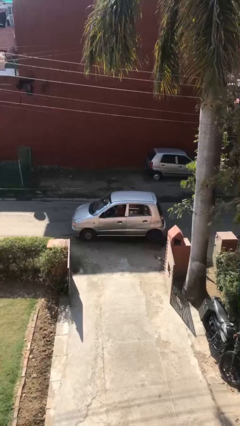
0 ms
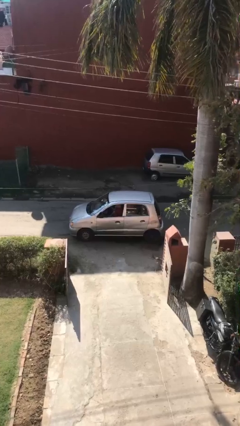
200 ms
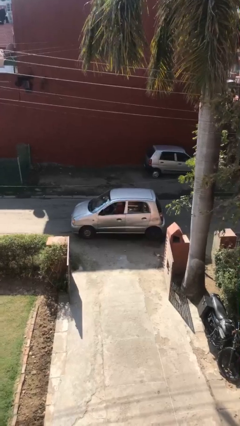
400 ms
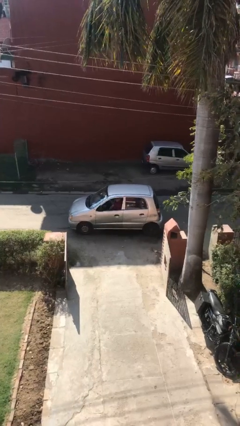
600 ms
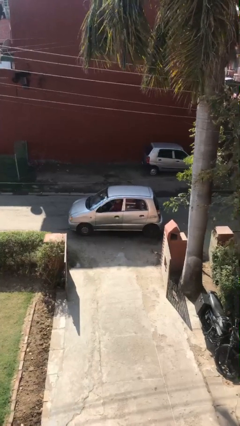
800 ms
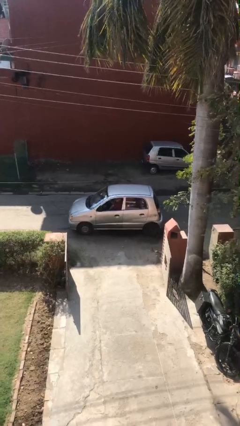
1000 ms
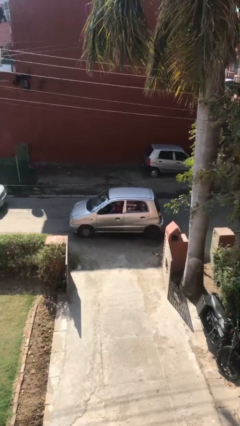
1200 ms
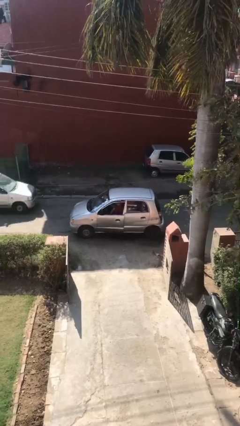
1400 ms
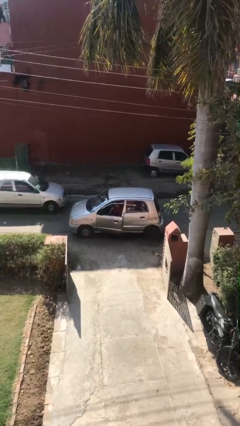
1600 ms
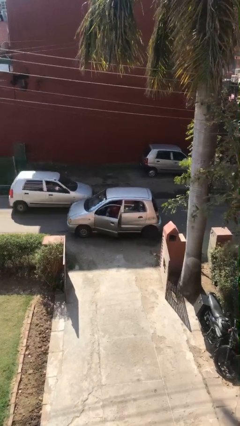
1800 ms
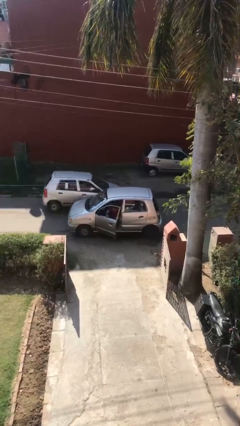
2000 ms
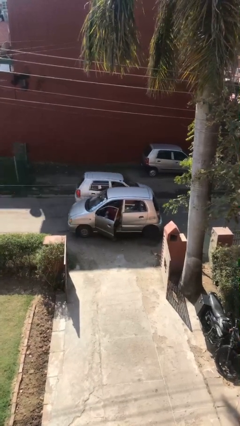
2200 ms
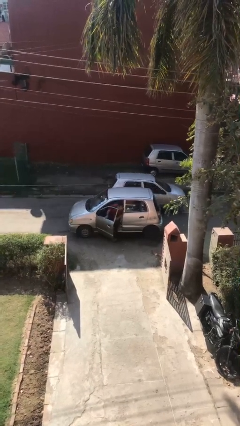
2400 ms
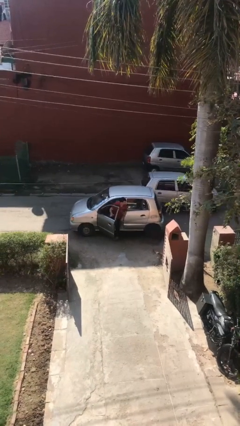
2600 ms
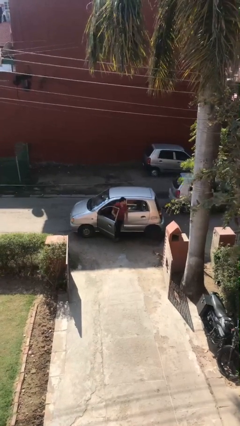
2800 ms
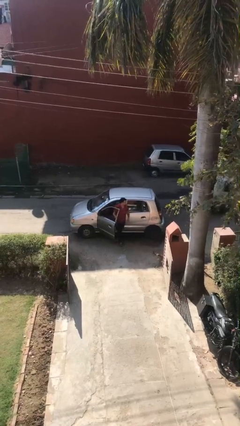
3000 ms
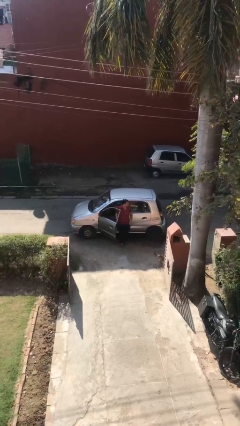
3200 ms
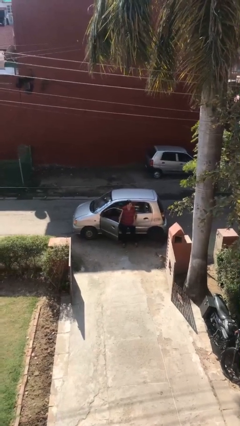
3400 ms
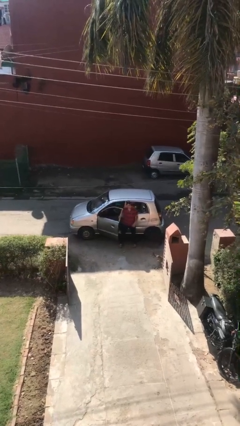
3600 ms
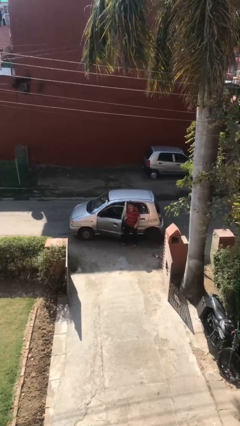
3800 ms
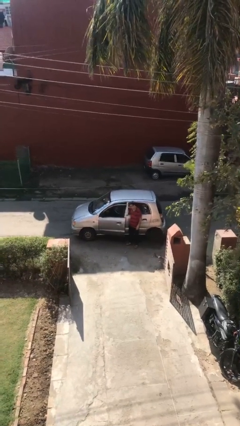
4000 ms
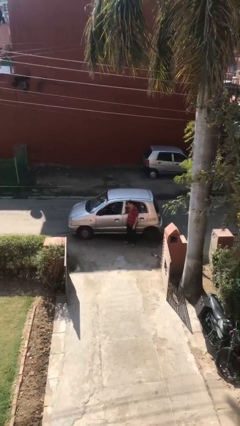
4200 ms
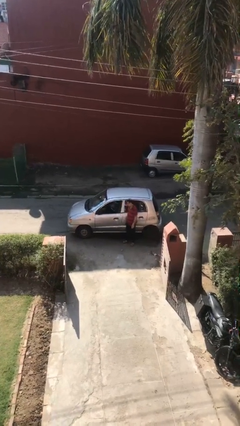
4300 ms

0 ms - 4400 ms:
car drops off person

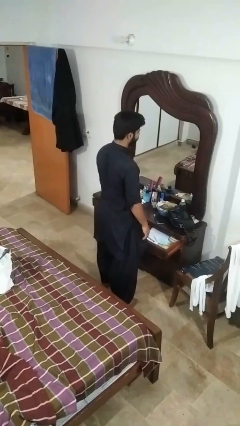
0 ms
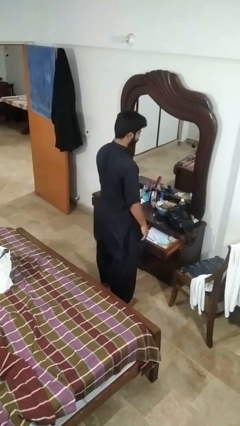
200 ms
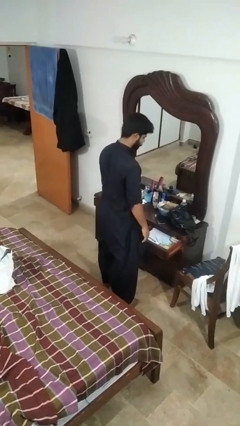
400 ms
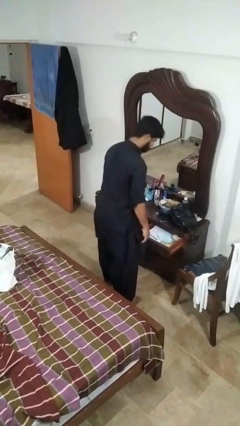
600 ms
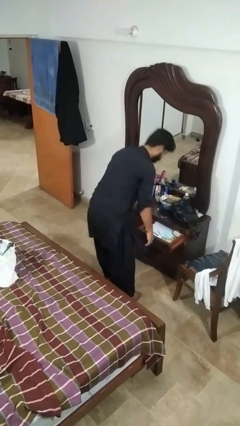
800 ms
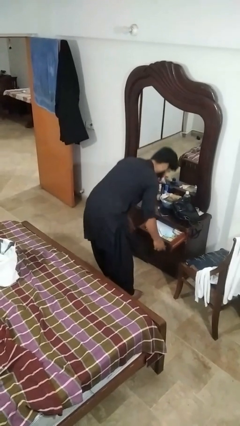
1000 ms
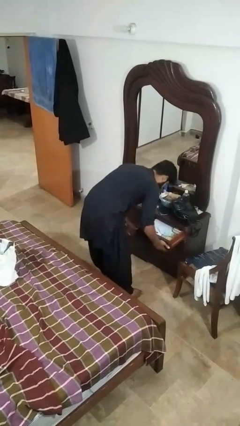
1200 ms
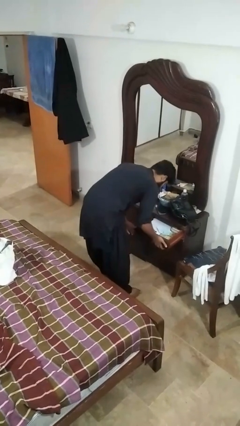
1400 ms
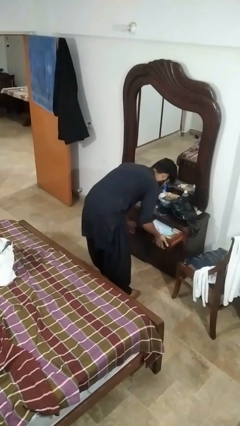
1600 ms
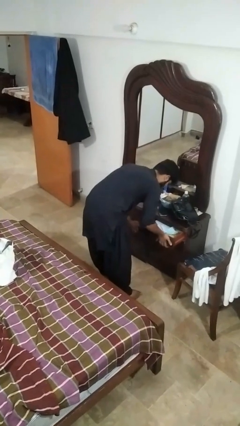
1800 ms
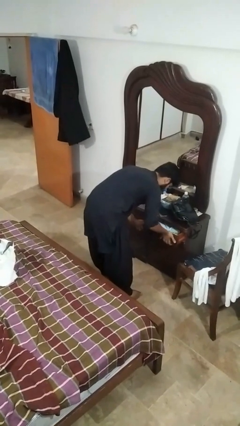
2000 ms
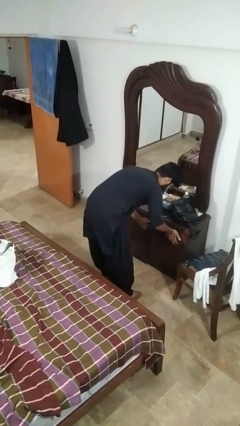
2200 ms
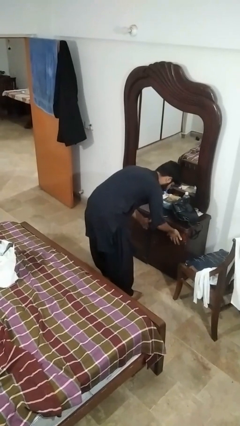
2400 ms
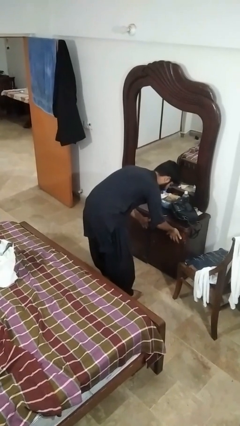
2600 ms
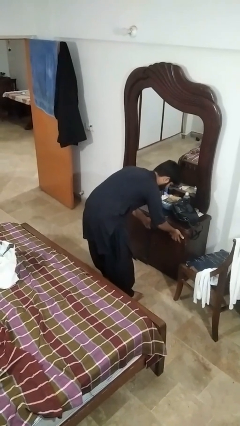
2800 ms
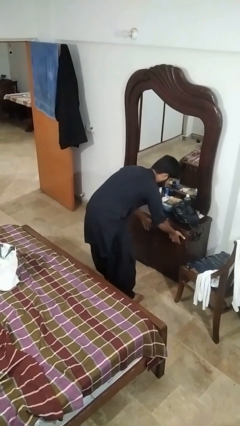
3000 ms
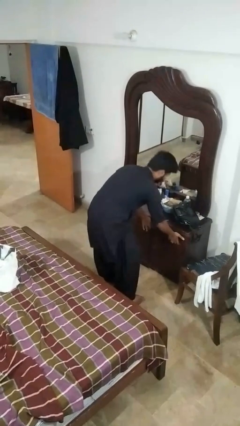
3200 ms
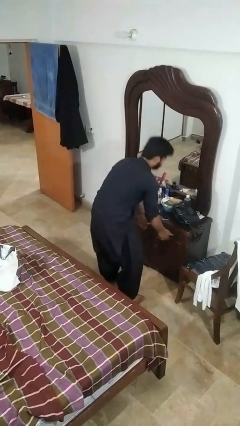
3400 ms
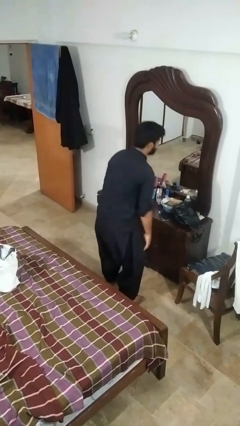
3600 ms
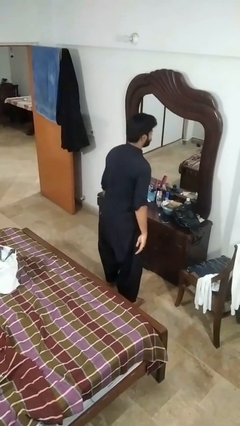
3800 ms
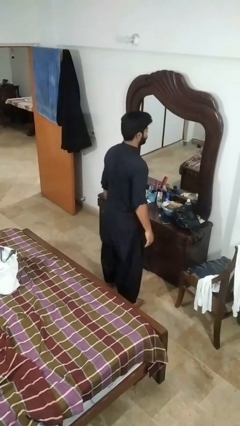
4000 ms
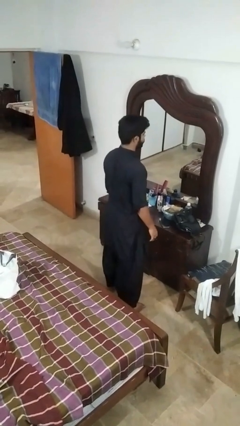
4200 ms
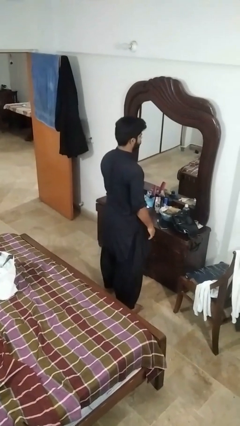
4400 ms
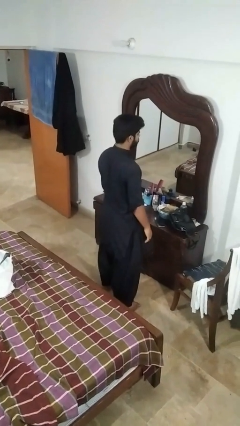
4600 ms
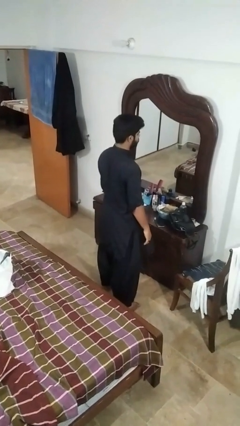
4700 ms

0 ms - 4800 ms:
person closes dresser drawer

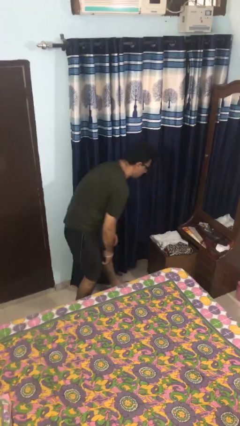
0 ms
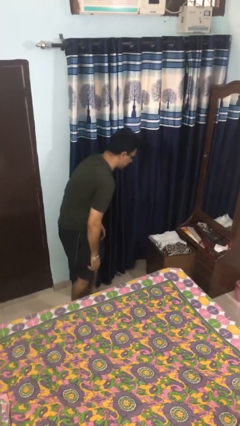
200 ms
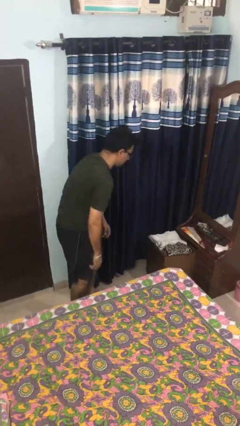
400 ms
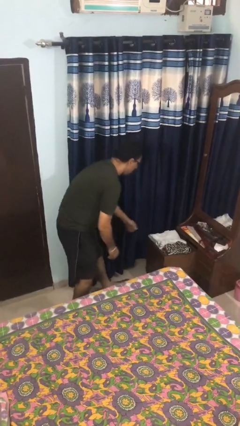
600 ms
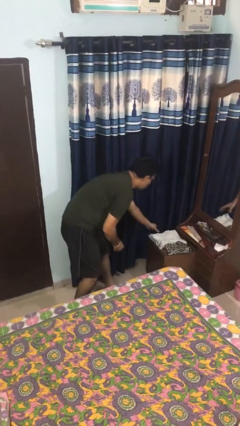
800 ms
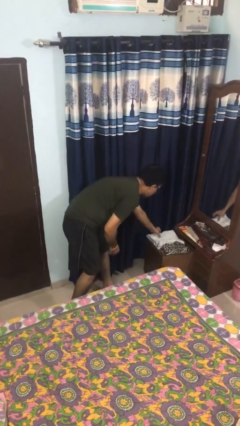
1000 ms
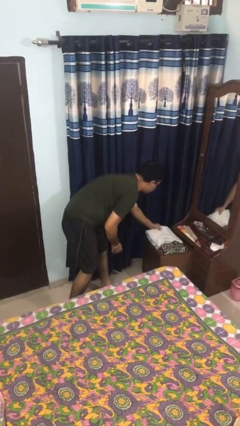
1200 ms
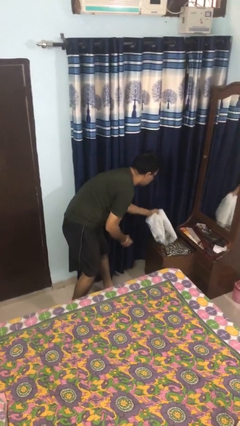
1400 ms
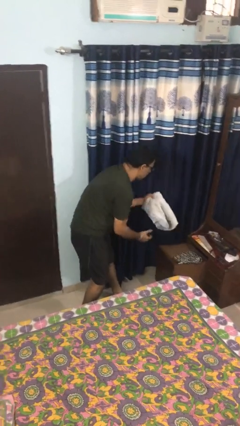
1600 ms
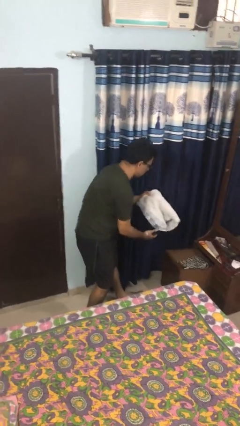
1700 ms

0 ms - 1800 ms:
person takes clothes from dresser

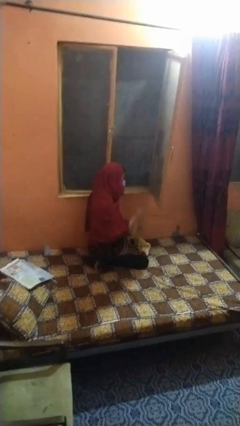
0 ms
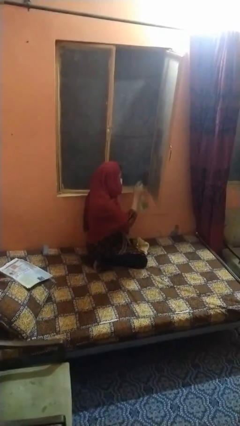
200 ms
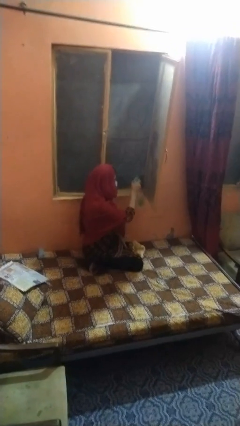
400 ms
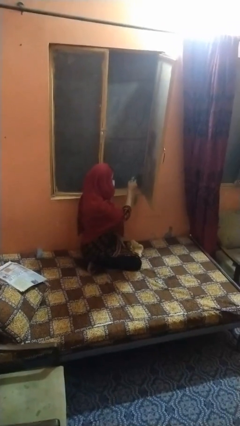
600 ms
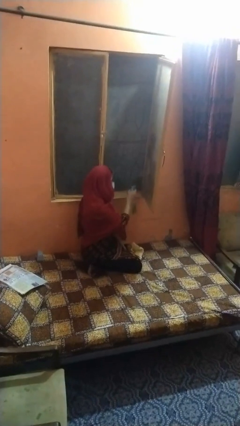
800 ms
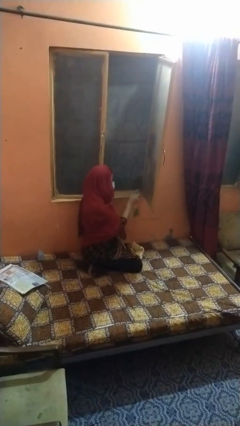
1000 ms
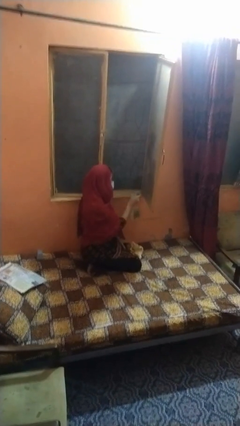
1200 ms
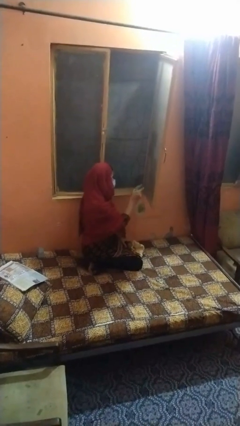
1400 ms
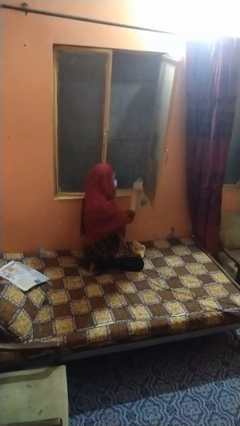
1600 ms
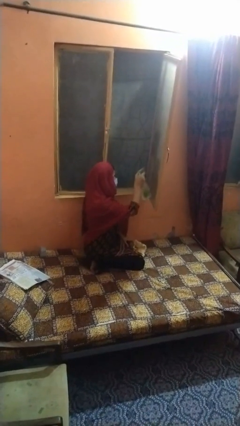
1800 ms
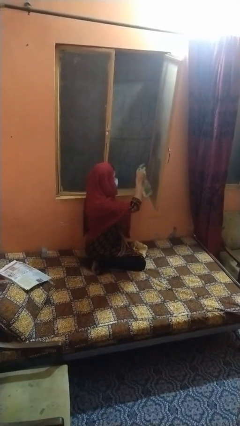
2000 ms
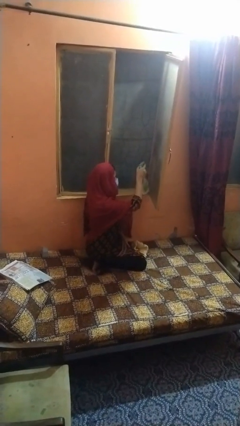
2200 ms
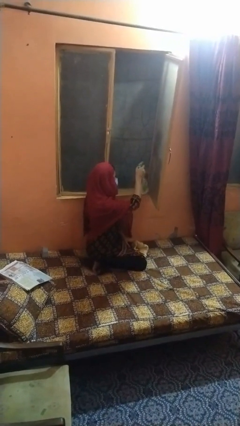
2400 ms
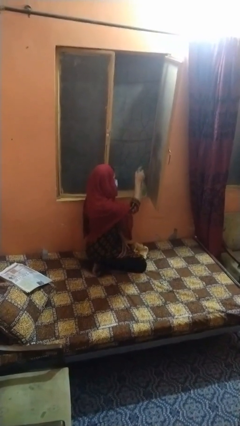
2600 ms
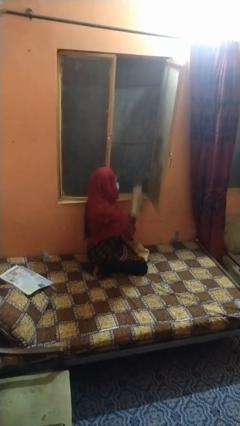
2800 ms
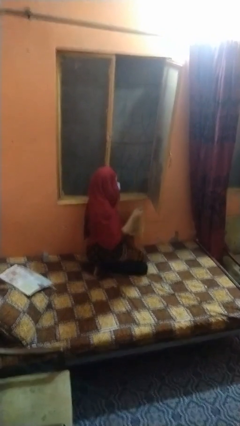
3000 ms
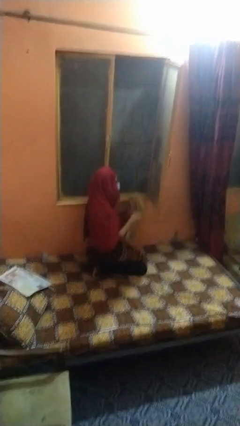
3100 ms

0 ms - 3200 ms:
person sprays from bottle

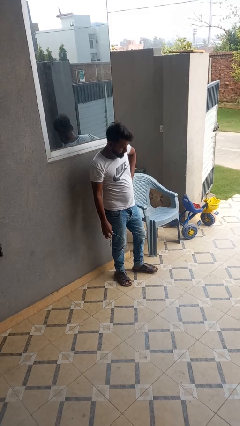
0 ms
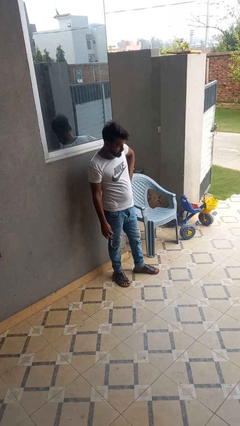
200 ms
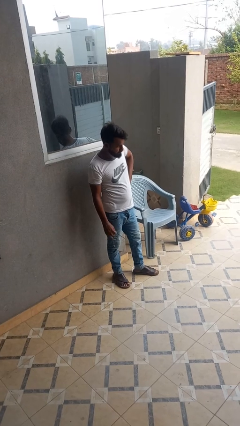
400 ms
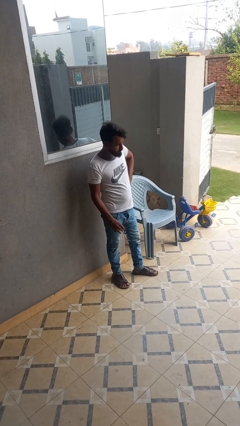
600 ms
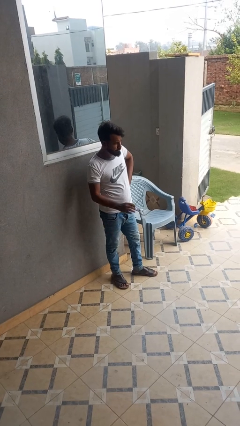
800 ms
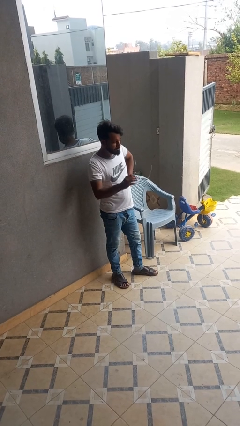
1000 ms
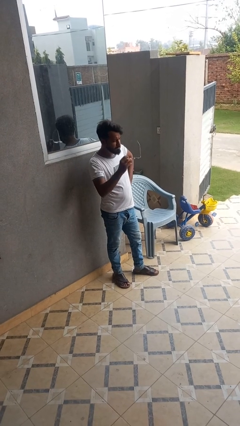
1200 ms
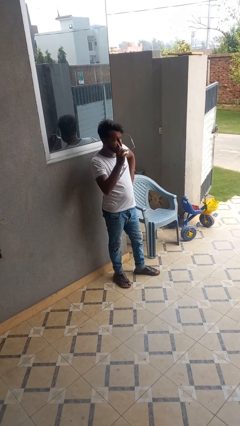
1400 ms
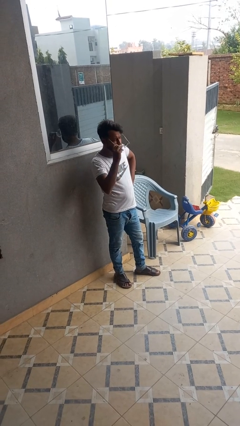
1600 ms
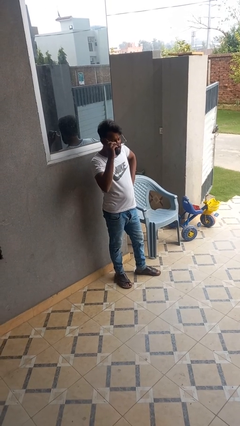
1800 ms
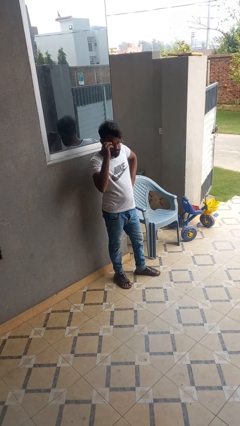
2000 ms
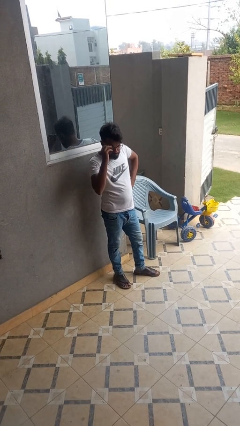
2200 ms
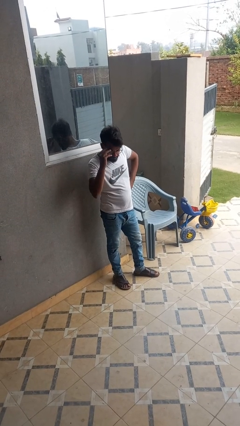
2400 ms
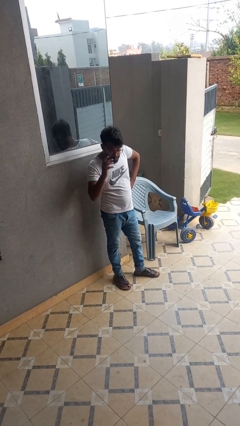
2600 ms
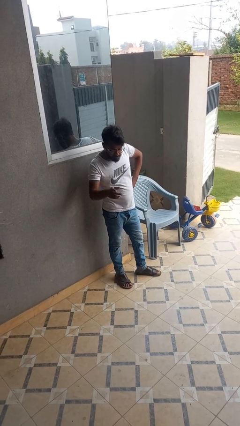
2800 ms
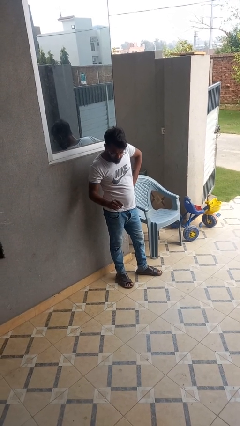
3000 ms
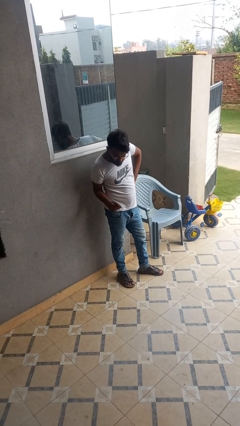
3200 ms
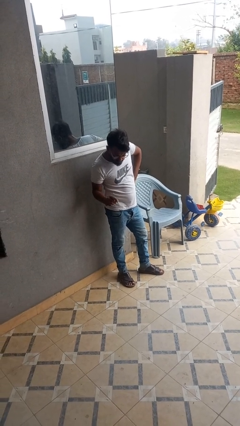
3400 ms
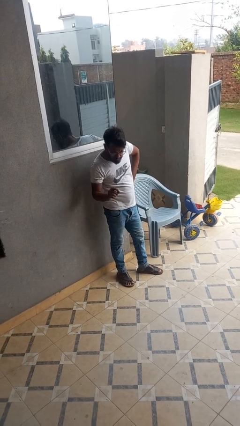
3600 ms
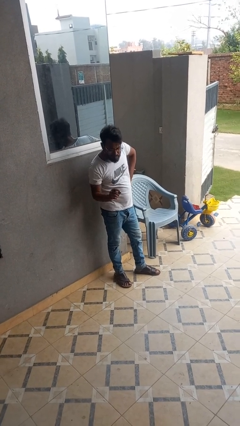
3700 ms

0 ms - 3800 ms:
person puts on glasses
